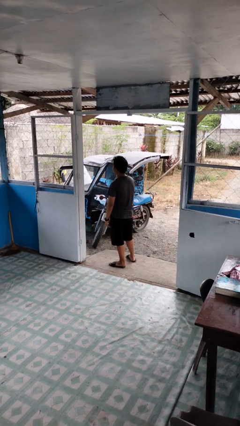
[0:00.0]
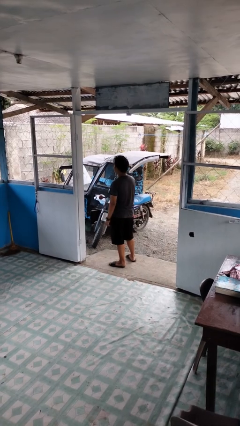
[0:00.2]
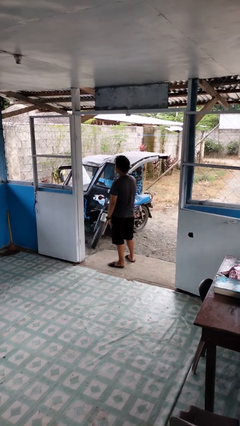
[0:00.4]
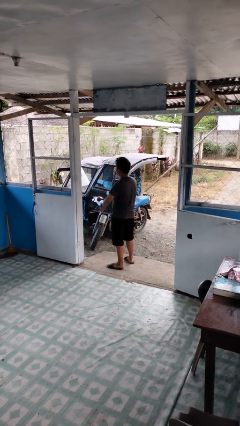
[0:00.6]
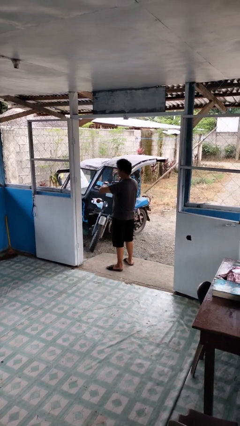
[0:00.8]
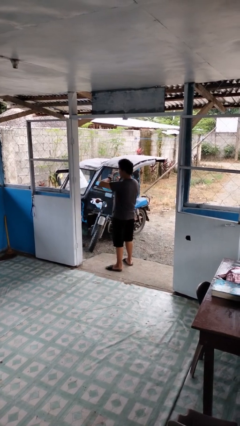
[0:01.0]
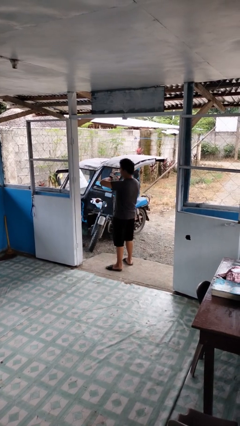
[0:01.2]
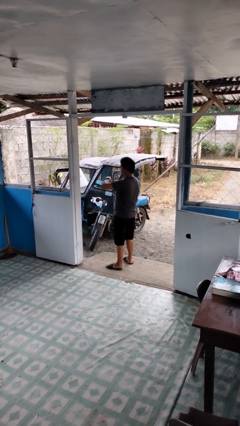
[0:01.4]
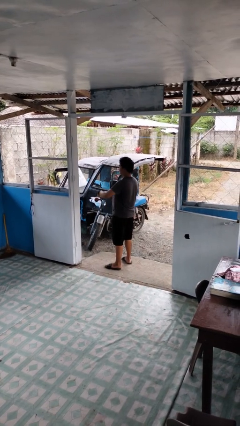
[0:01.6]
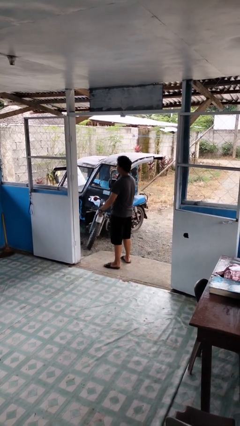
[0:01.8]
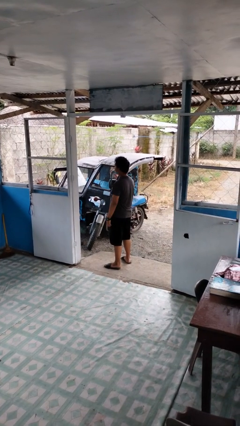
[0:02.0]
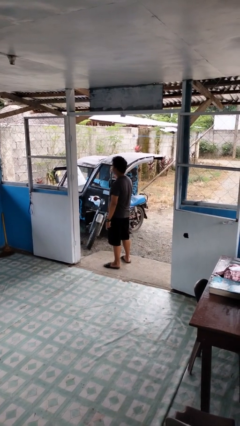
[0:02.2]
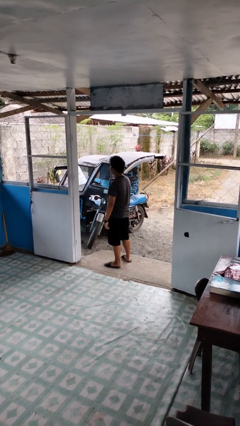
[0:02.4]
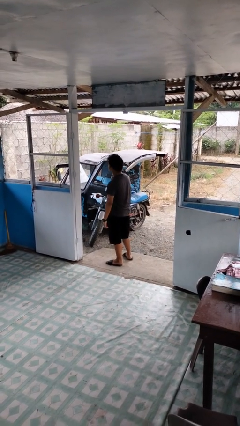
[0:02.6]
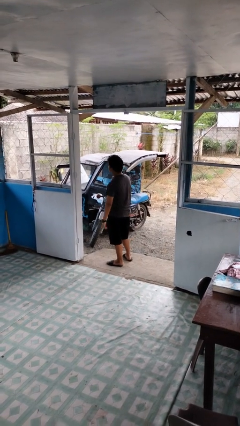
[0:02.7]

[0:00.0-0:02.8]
person looks at wristwatch

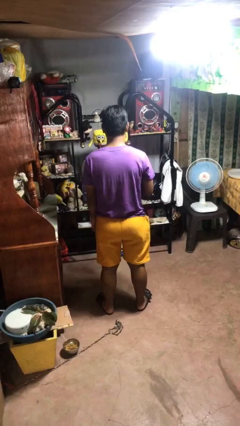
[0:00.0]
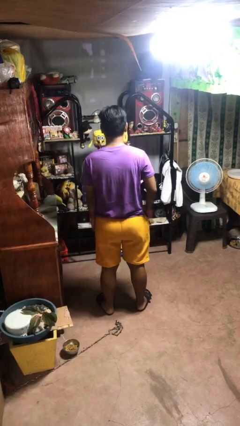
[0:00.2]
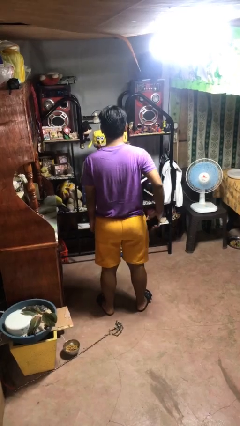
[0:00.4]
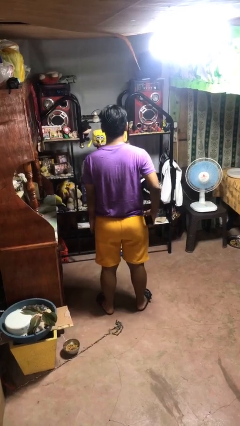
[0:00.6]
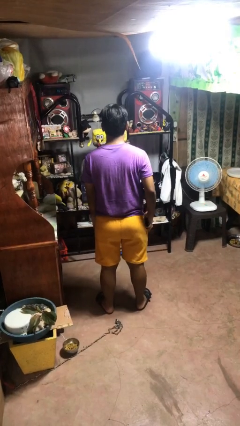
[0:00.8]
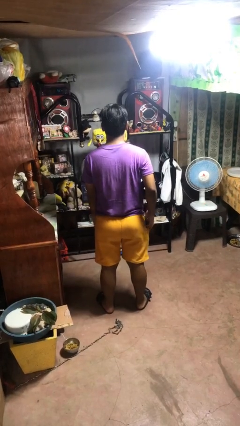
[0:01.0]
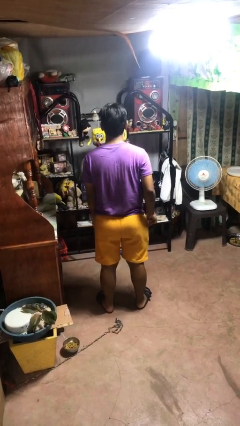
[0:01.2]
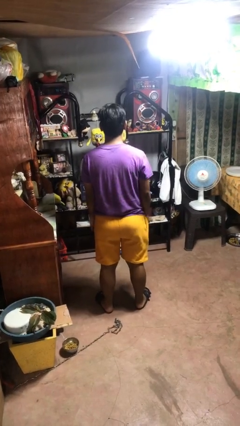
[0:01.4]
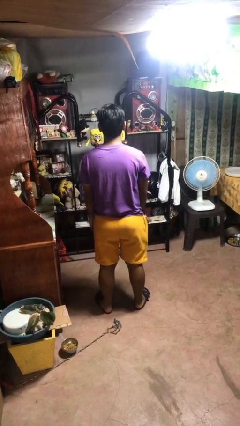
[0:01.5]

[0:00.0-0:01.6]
person puts phone into pocket

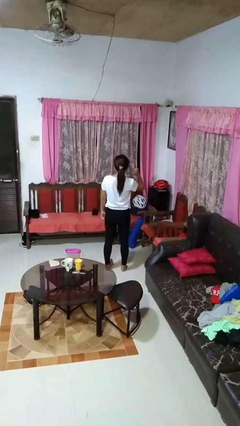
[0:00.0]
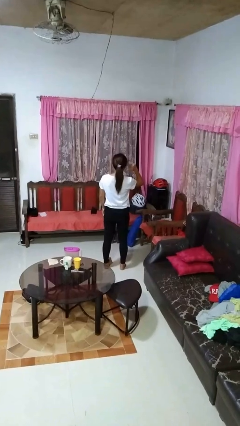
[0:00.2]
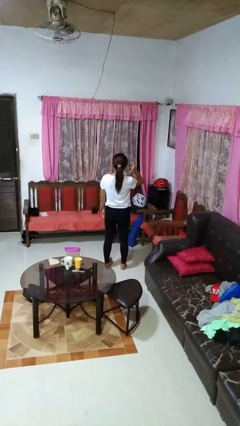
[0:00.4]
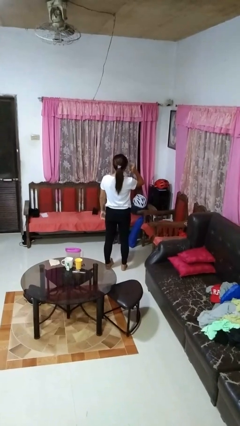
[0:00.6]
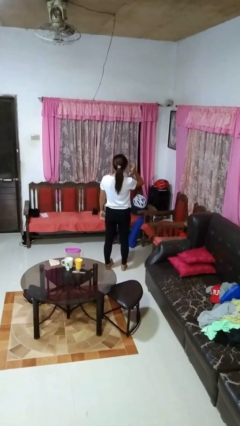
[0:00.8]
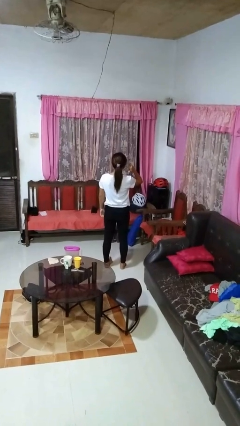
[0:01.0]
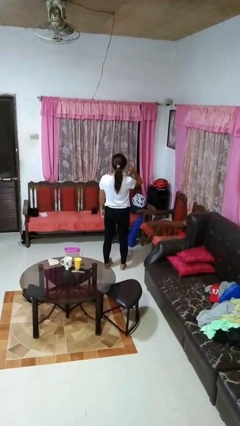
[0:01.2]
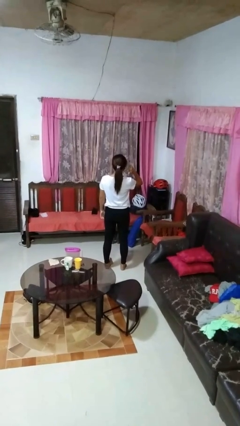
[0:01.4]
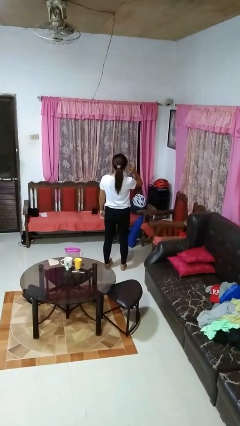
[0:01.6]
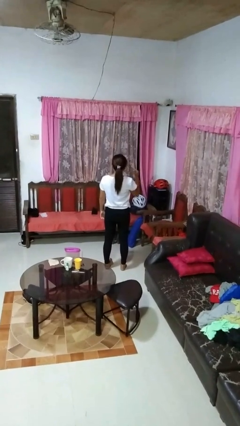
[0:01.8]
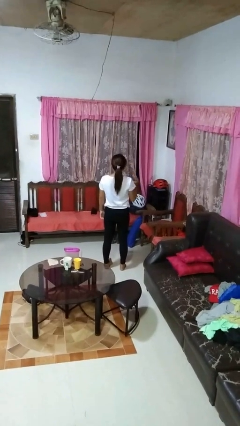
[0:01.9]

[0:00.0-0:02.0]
person gestures behind me

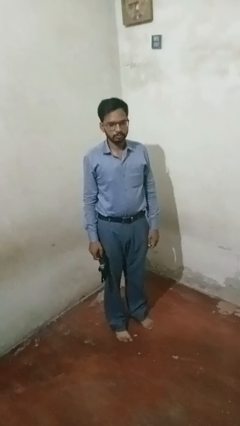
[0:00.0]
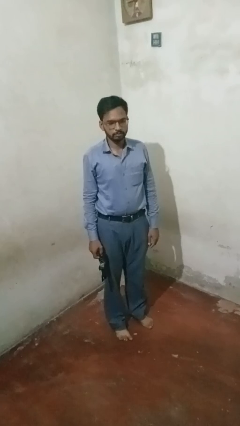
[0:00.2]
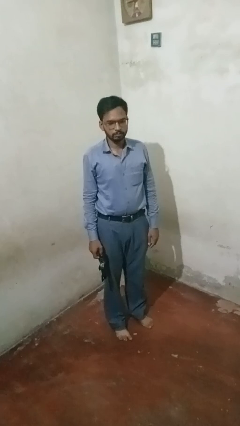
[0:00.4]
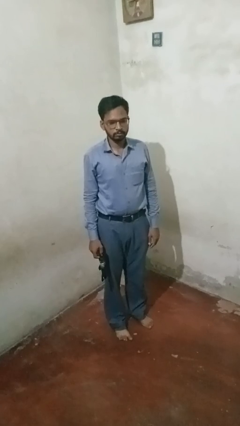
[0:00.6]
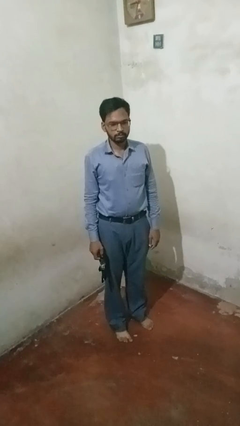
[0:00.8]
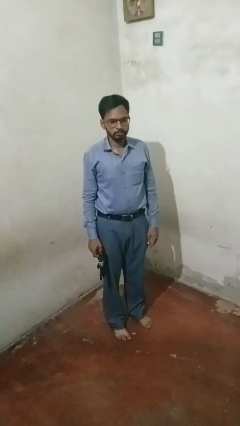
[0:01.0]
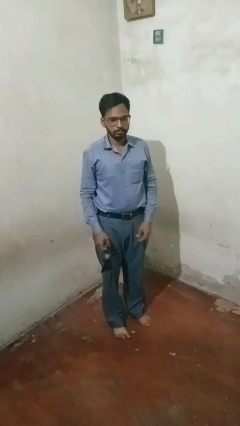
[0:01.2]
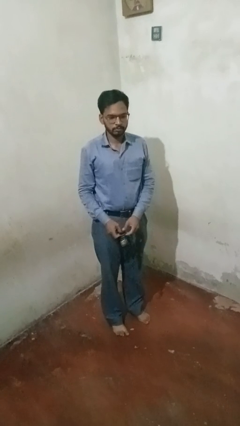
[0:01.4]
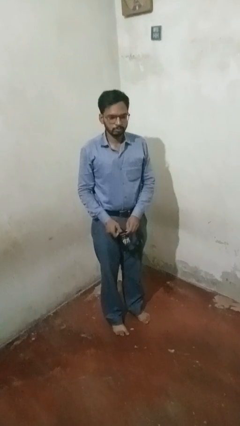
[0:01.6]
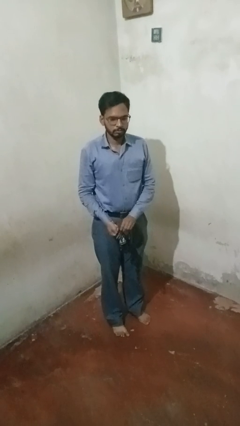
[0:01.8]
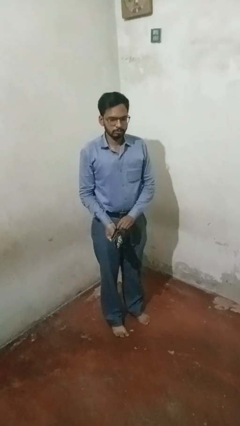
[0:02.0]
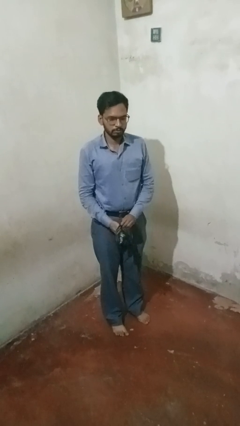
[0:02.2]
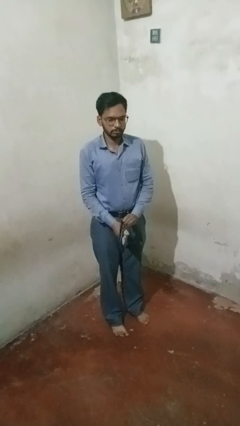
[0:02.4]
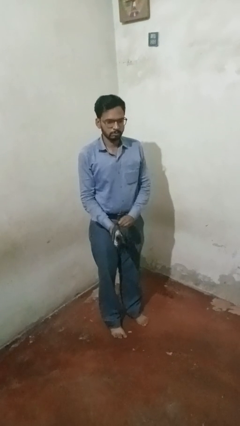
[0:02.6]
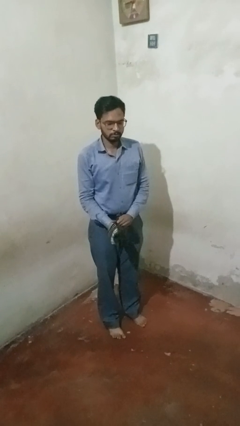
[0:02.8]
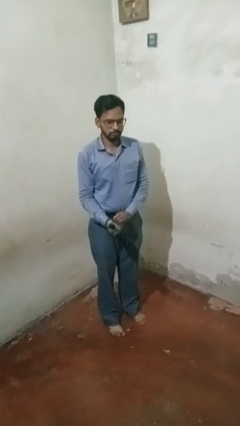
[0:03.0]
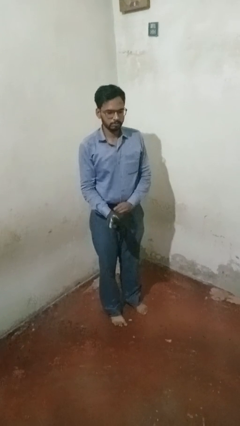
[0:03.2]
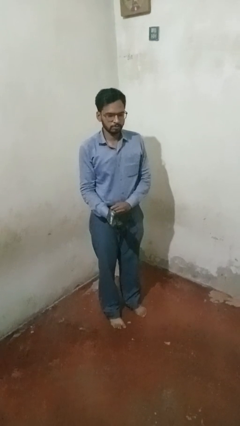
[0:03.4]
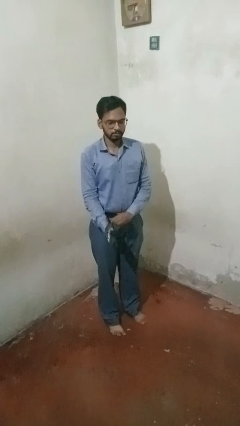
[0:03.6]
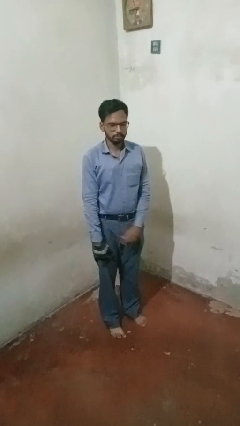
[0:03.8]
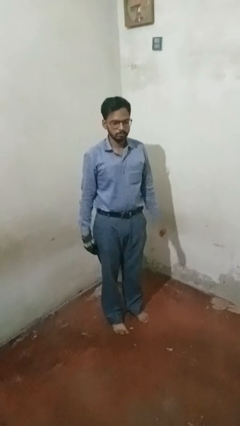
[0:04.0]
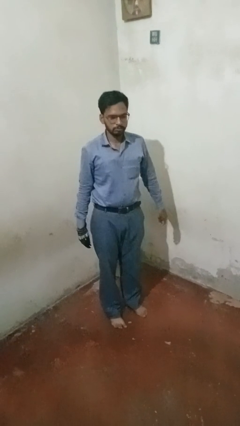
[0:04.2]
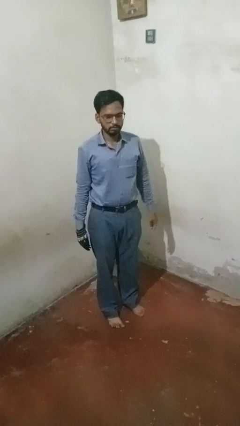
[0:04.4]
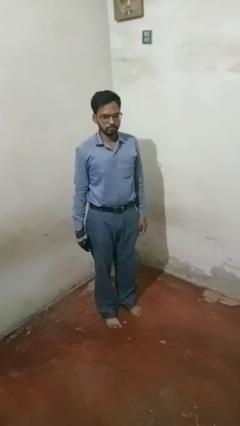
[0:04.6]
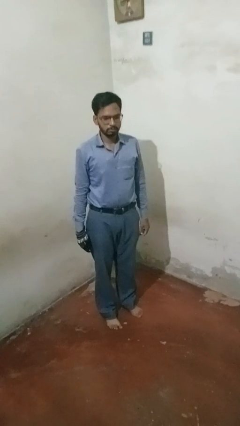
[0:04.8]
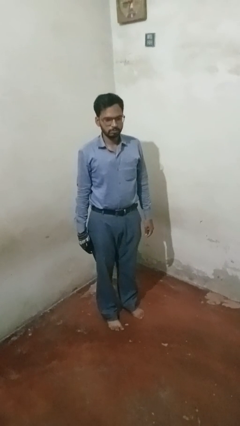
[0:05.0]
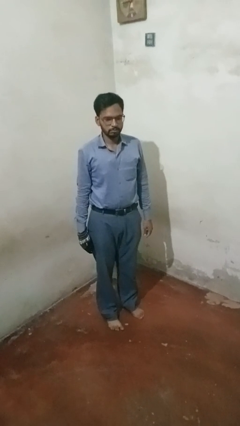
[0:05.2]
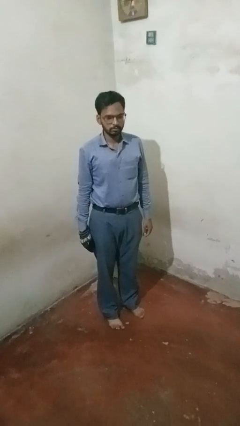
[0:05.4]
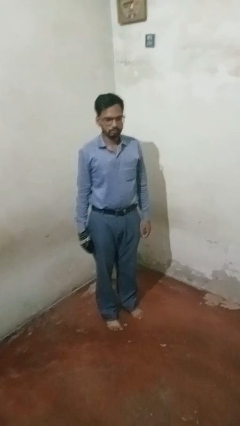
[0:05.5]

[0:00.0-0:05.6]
person puts on gloves

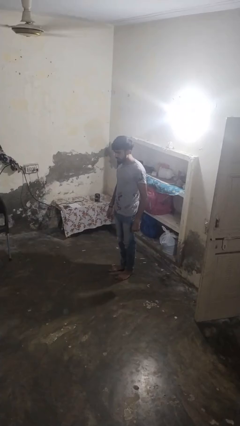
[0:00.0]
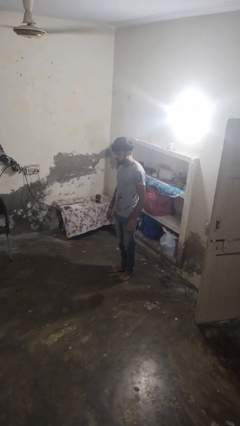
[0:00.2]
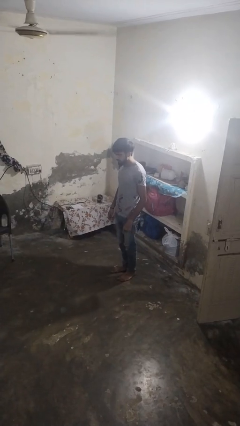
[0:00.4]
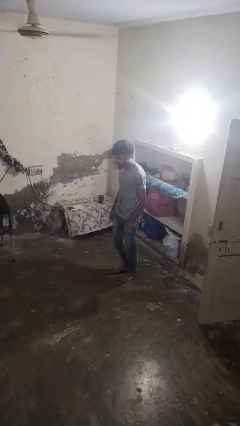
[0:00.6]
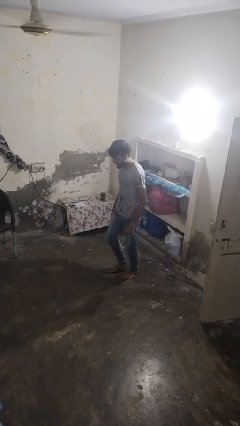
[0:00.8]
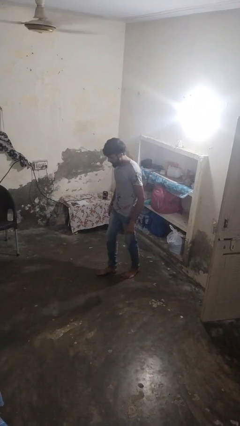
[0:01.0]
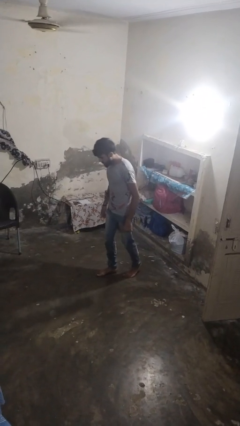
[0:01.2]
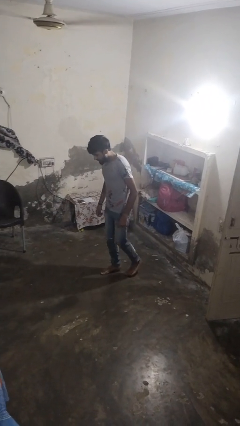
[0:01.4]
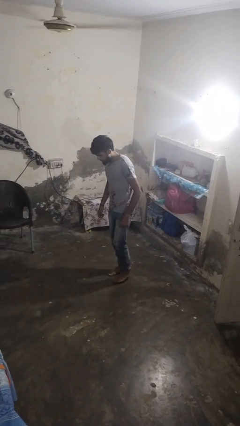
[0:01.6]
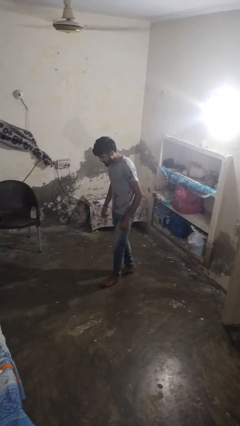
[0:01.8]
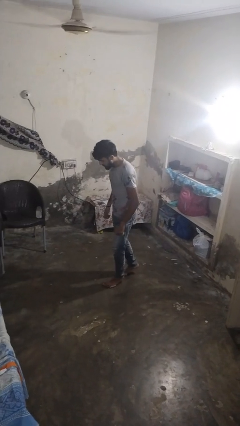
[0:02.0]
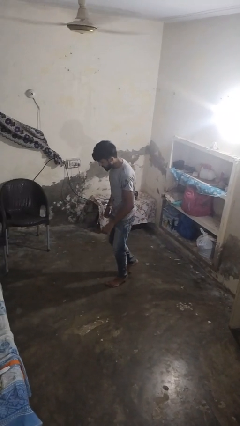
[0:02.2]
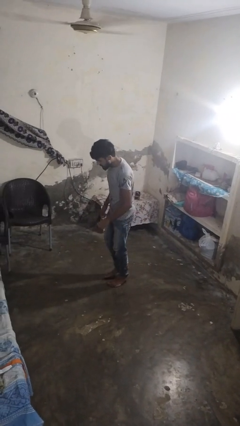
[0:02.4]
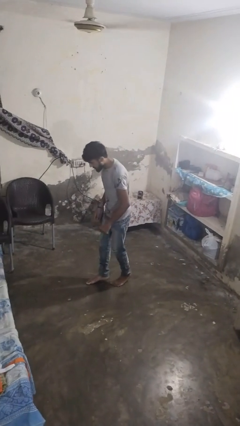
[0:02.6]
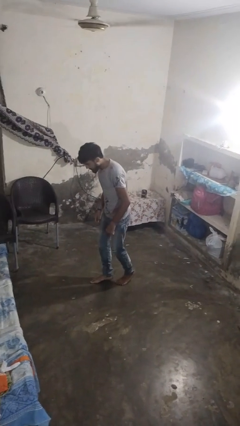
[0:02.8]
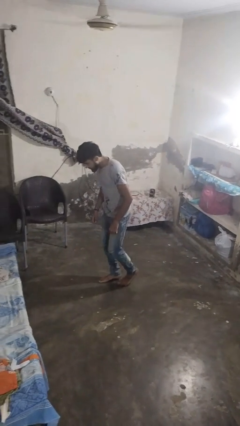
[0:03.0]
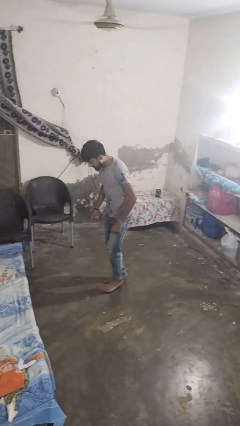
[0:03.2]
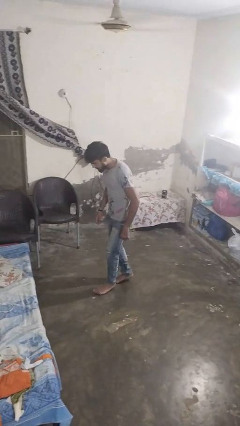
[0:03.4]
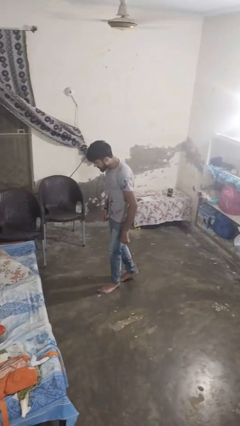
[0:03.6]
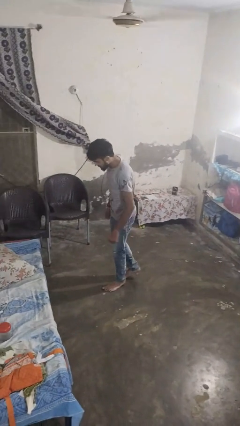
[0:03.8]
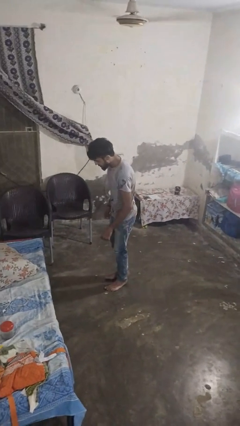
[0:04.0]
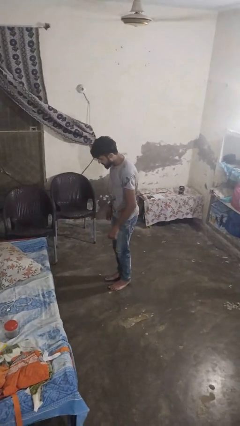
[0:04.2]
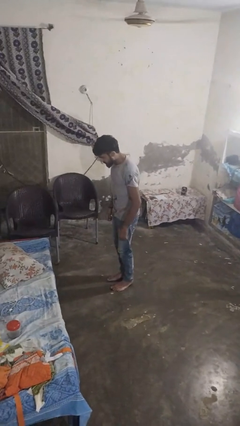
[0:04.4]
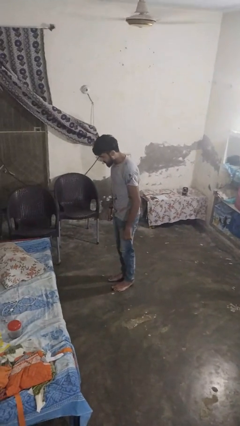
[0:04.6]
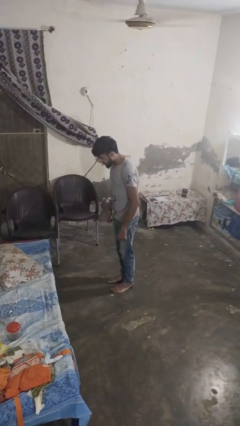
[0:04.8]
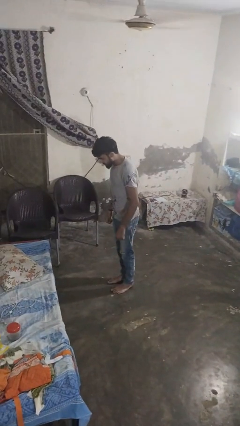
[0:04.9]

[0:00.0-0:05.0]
person walks tiptoe

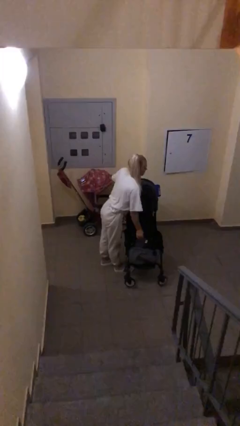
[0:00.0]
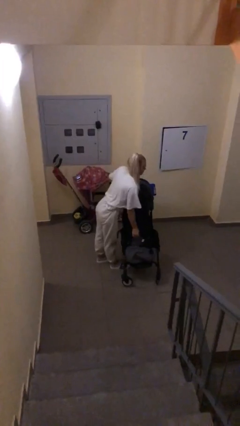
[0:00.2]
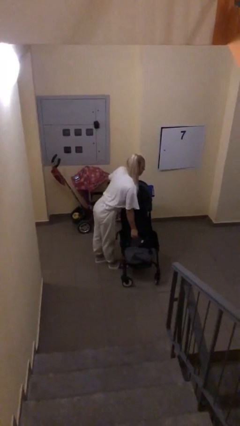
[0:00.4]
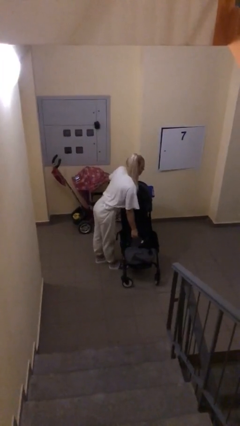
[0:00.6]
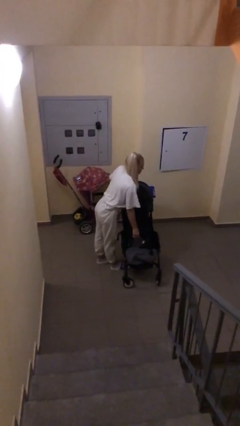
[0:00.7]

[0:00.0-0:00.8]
person puts down object on floor
